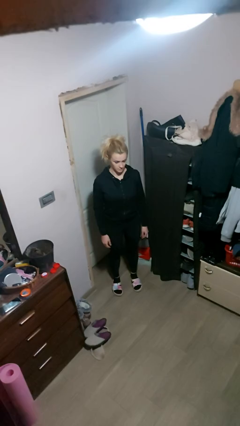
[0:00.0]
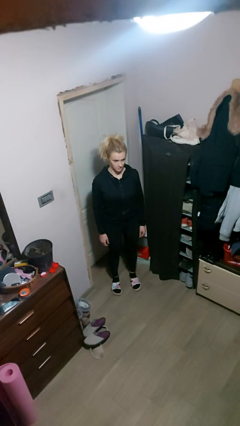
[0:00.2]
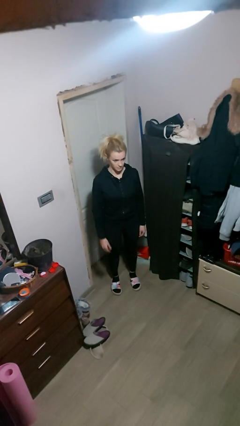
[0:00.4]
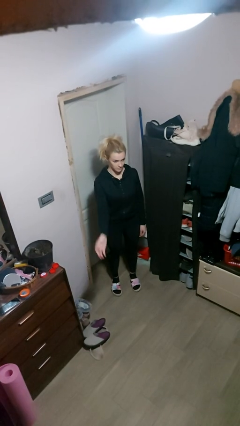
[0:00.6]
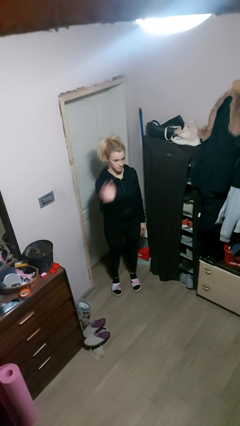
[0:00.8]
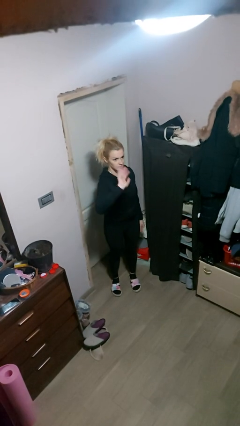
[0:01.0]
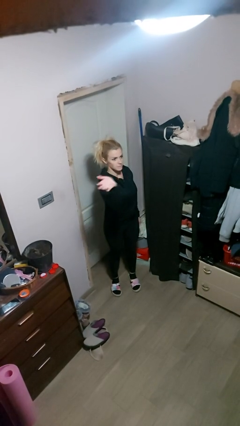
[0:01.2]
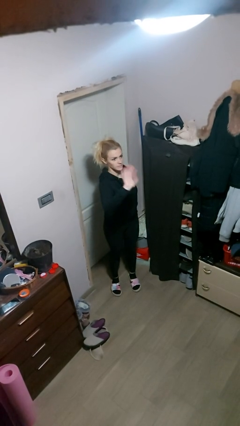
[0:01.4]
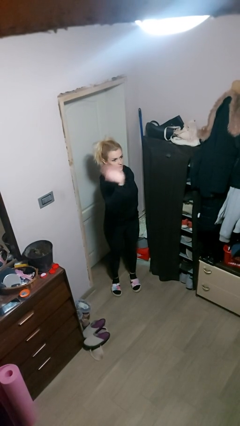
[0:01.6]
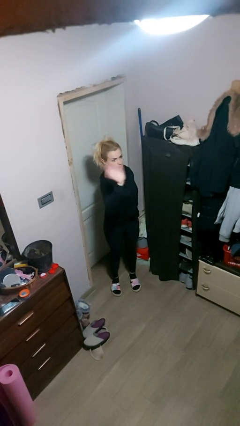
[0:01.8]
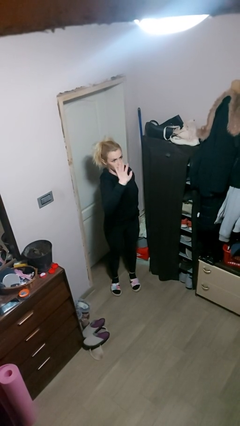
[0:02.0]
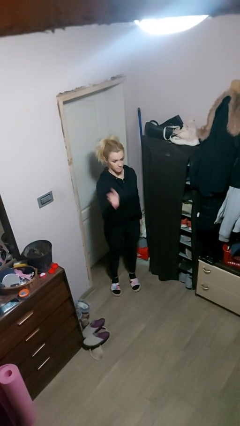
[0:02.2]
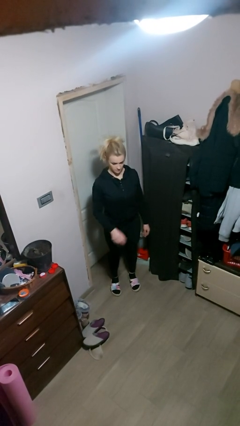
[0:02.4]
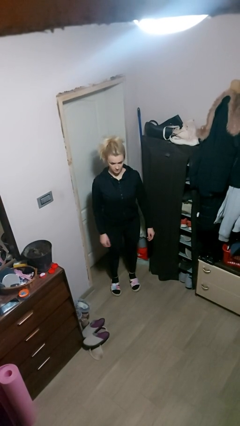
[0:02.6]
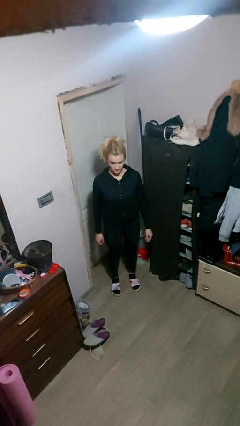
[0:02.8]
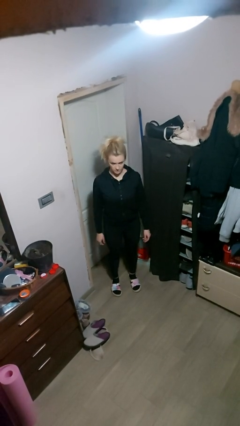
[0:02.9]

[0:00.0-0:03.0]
person waves at person

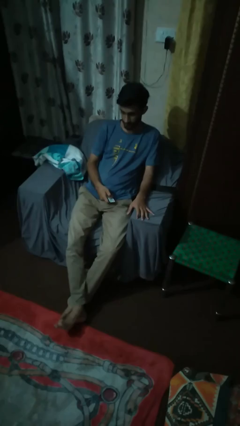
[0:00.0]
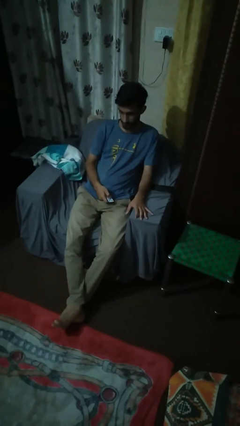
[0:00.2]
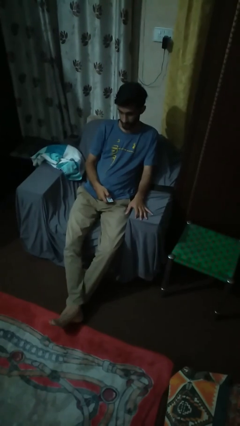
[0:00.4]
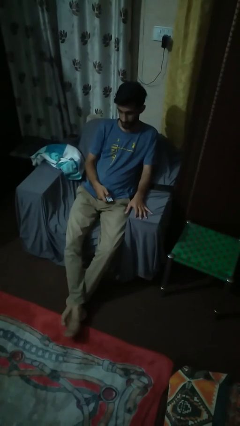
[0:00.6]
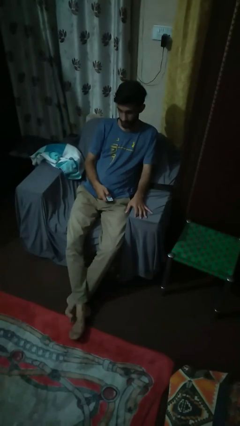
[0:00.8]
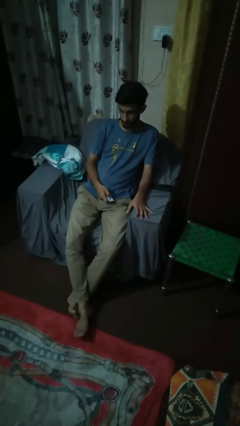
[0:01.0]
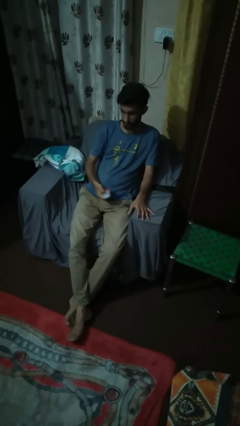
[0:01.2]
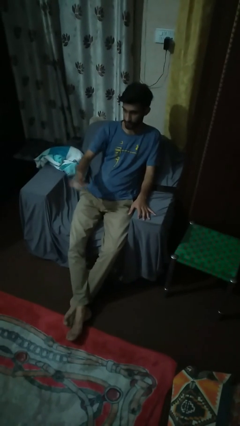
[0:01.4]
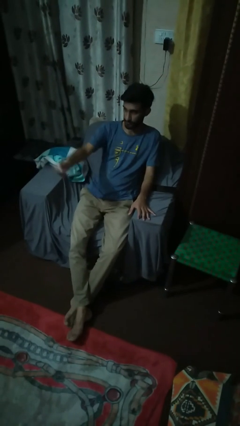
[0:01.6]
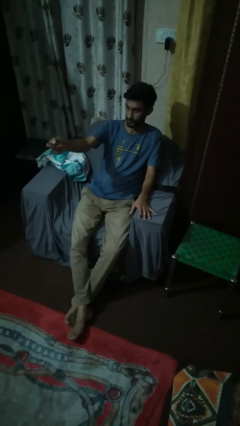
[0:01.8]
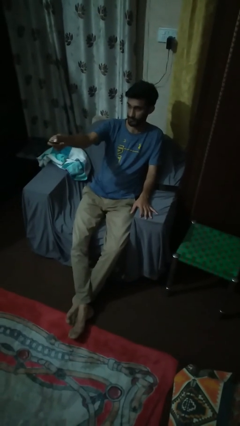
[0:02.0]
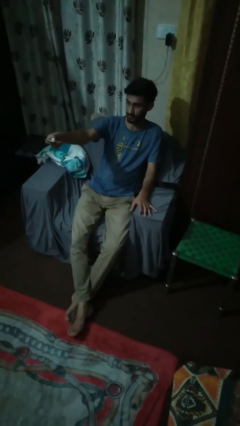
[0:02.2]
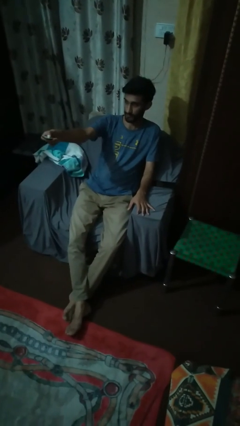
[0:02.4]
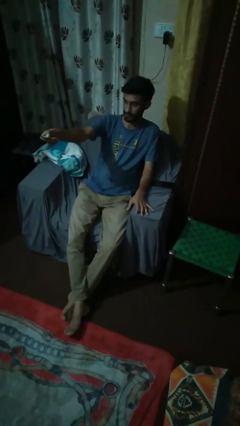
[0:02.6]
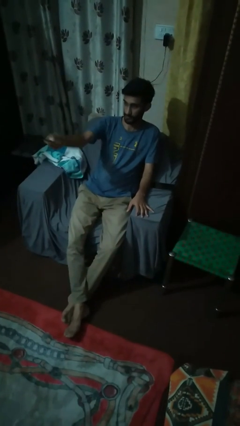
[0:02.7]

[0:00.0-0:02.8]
person uses television remote

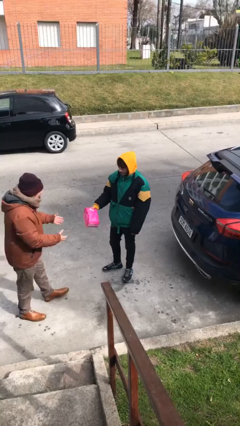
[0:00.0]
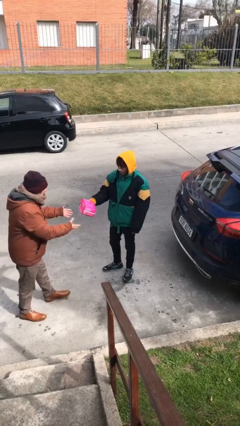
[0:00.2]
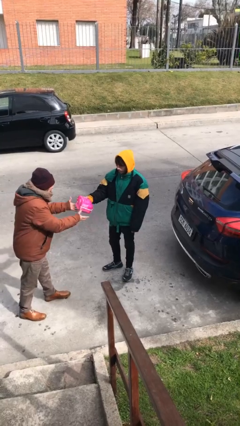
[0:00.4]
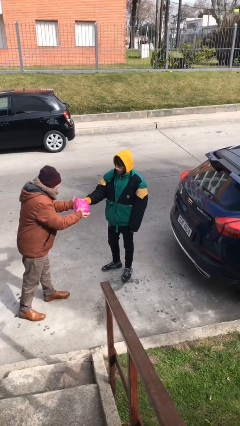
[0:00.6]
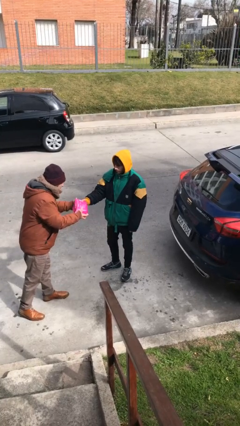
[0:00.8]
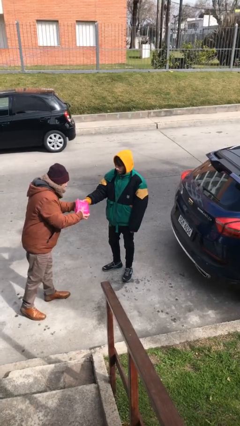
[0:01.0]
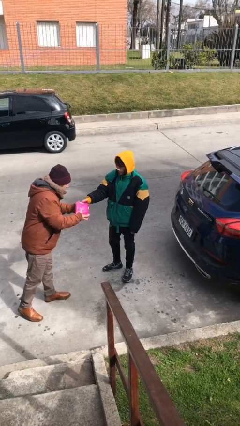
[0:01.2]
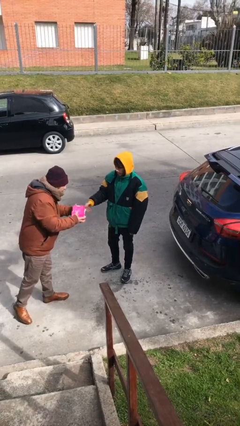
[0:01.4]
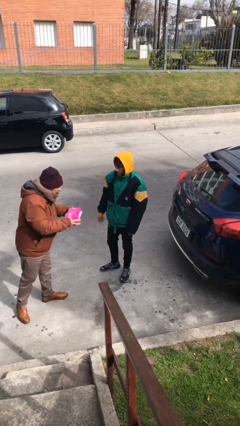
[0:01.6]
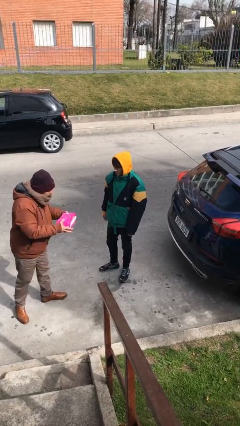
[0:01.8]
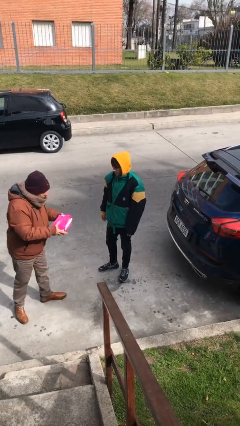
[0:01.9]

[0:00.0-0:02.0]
person transfers object to person

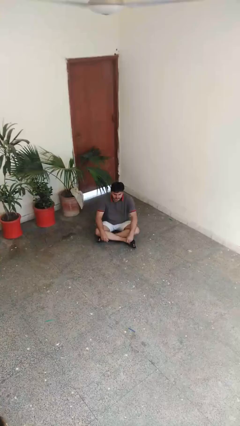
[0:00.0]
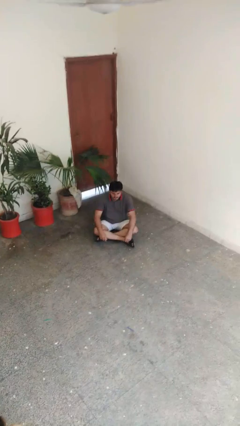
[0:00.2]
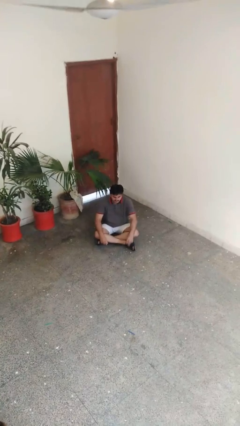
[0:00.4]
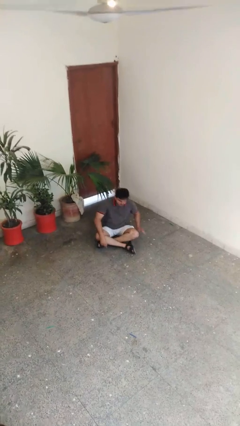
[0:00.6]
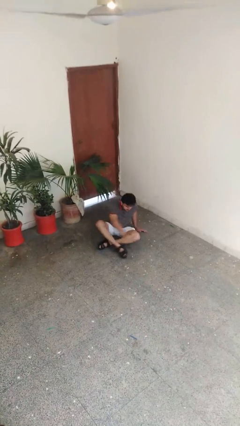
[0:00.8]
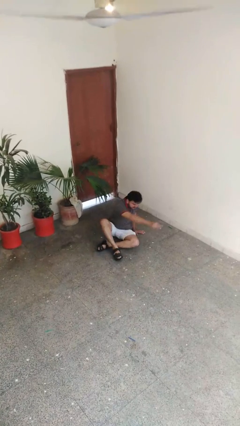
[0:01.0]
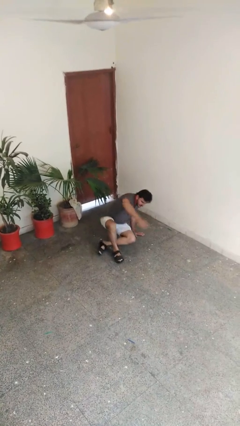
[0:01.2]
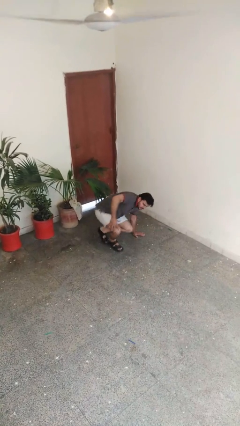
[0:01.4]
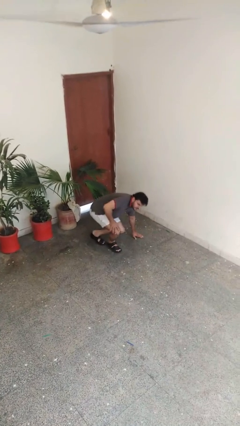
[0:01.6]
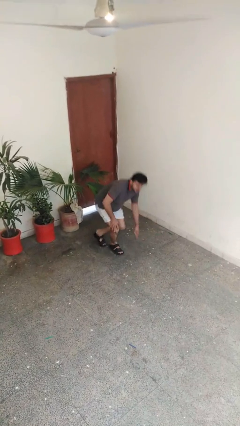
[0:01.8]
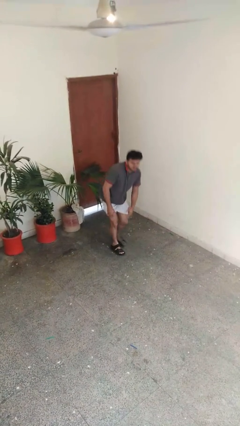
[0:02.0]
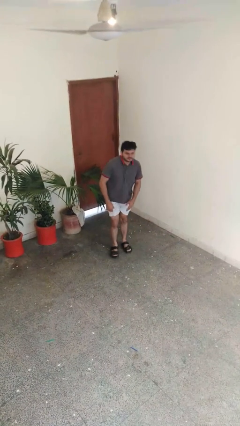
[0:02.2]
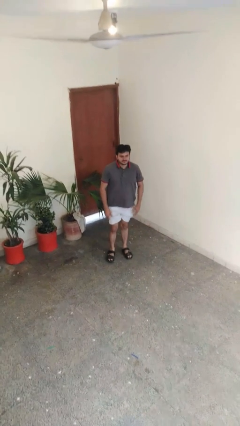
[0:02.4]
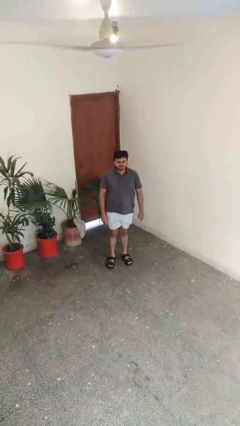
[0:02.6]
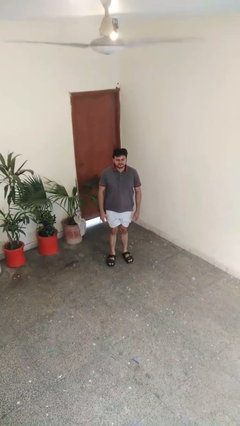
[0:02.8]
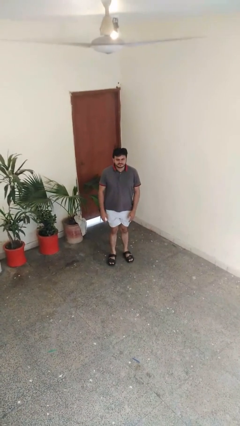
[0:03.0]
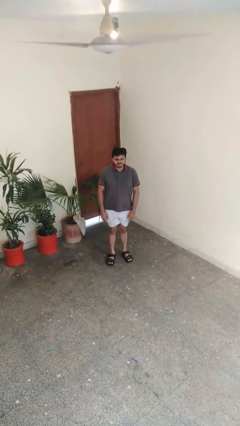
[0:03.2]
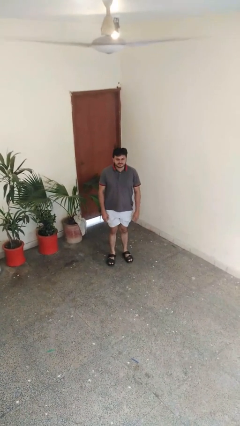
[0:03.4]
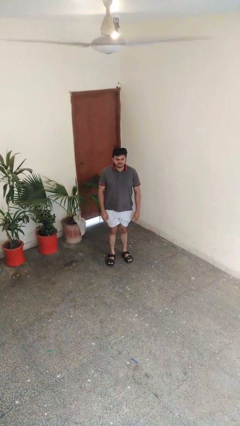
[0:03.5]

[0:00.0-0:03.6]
person stands up from floor

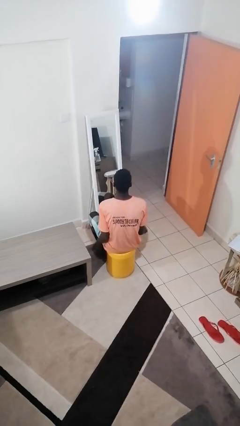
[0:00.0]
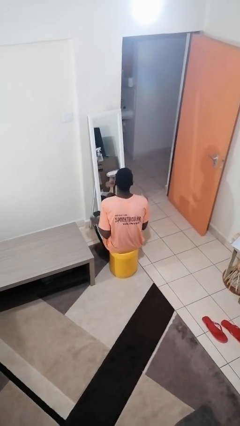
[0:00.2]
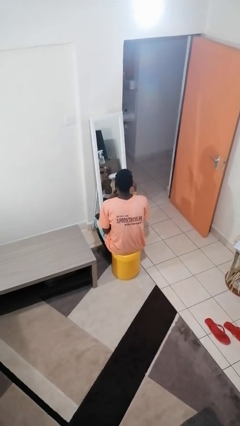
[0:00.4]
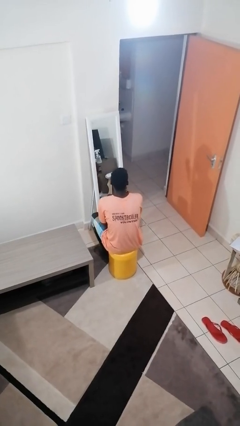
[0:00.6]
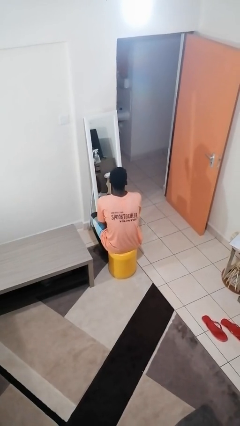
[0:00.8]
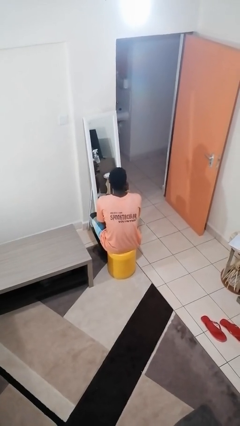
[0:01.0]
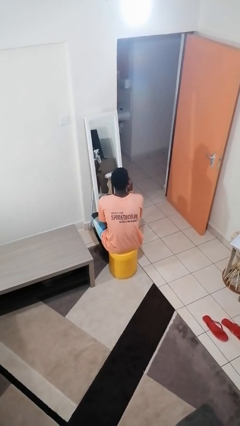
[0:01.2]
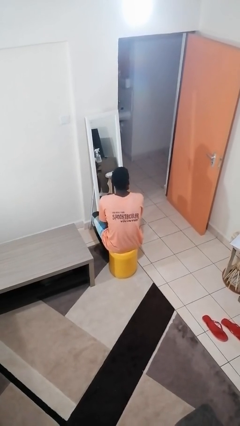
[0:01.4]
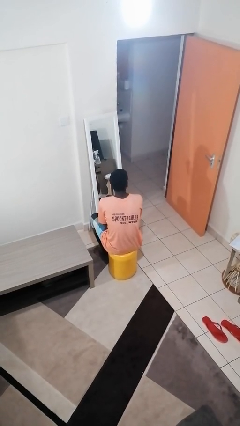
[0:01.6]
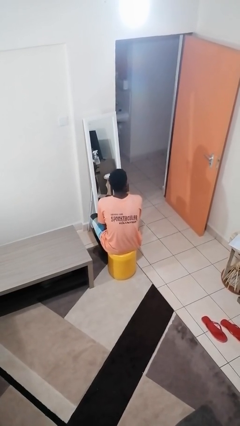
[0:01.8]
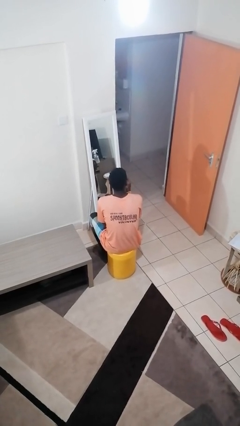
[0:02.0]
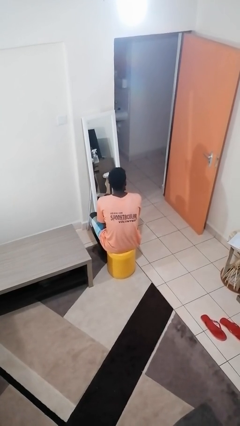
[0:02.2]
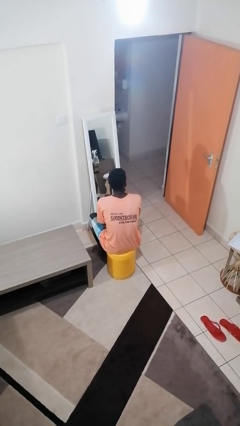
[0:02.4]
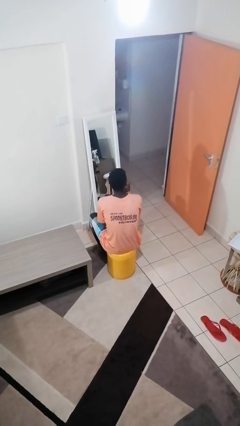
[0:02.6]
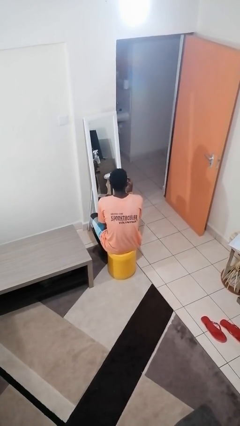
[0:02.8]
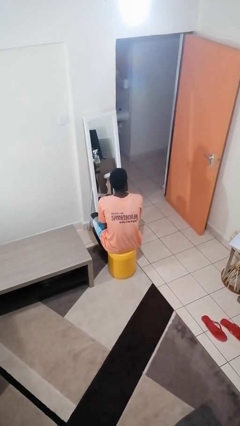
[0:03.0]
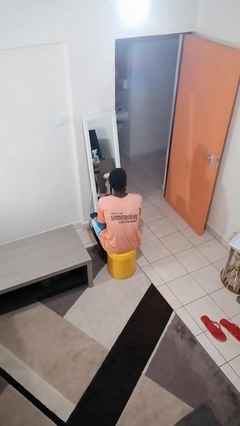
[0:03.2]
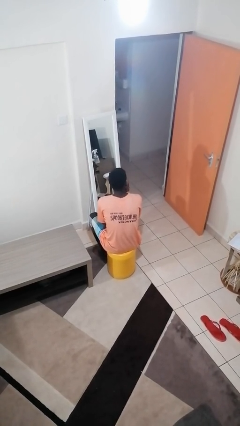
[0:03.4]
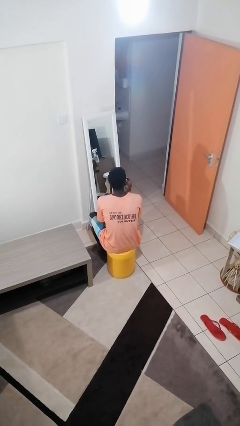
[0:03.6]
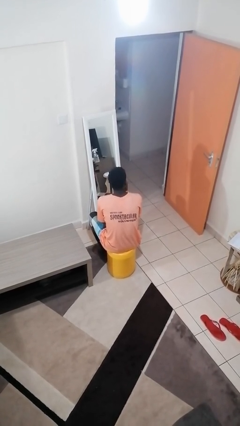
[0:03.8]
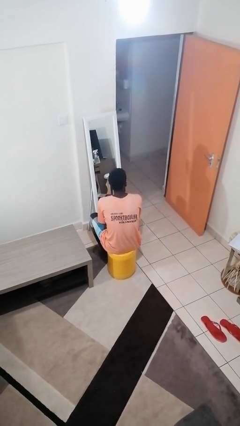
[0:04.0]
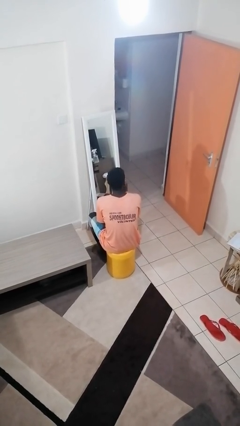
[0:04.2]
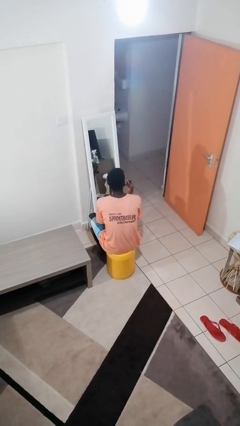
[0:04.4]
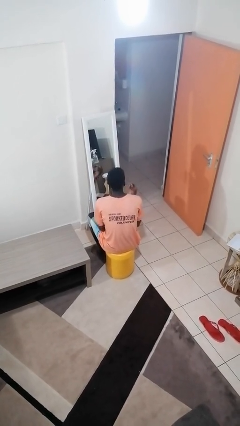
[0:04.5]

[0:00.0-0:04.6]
person applies lip makeup

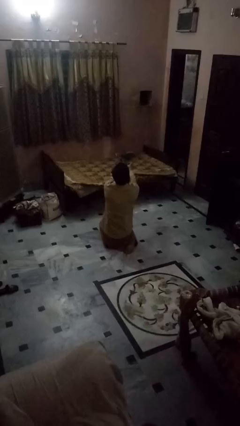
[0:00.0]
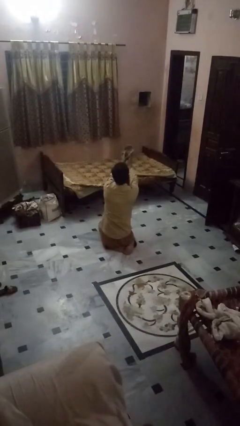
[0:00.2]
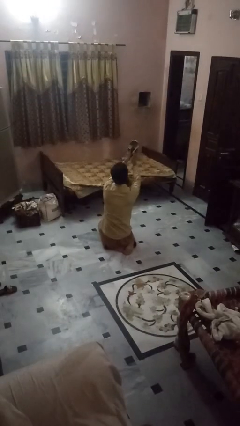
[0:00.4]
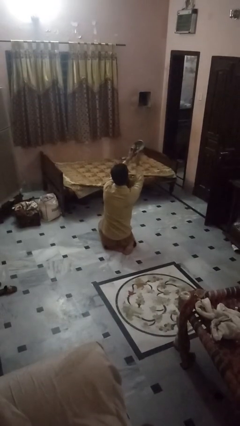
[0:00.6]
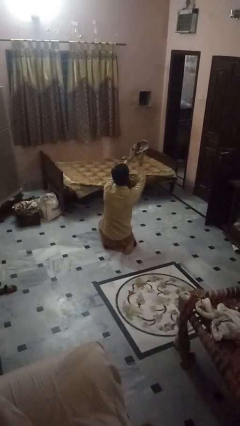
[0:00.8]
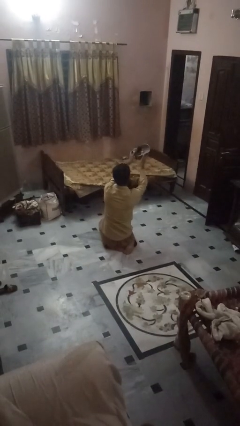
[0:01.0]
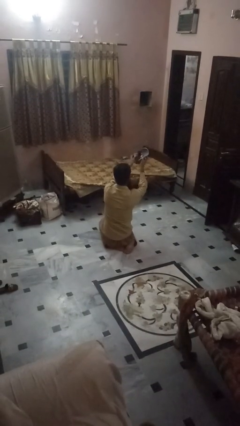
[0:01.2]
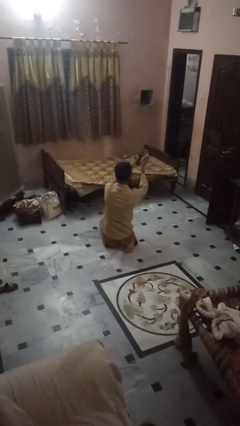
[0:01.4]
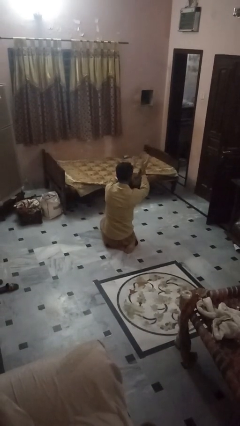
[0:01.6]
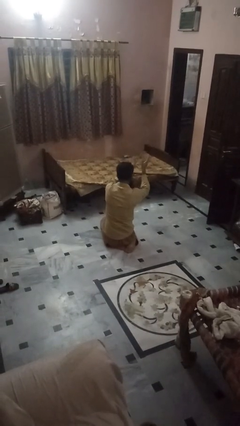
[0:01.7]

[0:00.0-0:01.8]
person drops object
